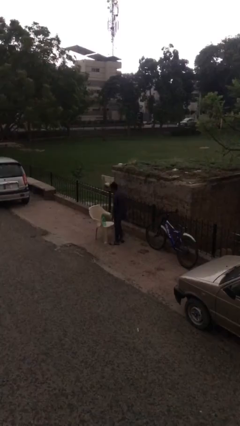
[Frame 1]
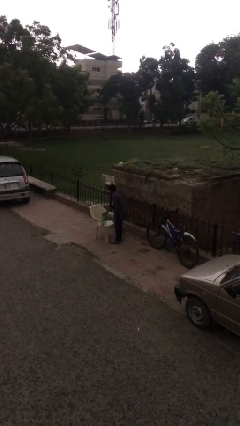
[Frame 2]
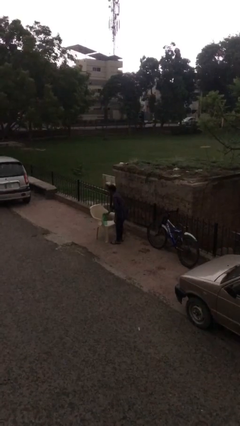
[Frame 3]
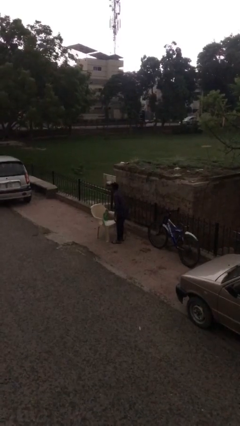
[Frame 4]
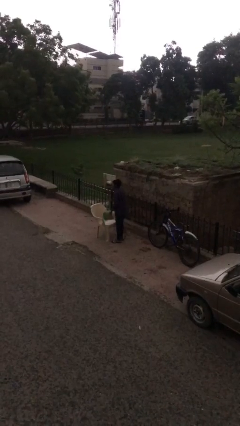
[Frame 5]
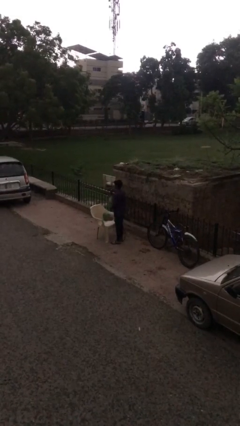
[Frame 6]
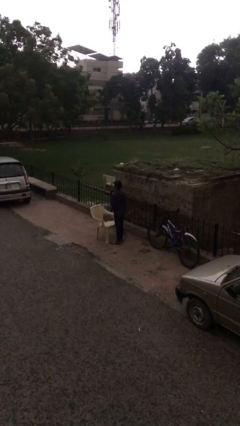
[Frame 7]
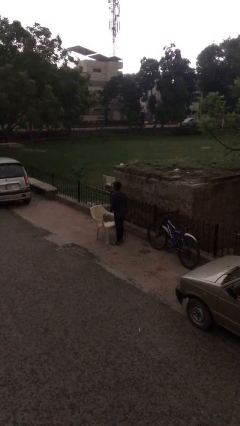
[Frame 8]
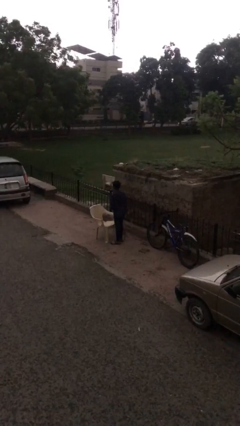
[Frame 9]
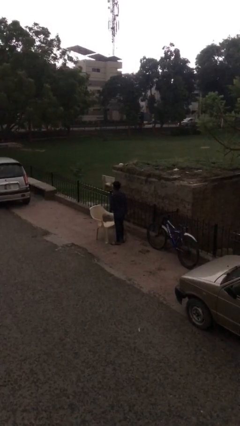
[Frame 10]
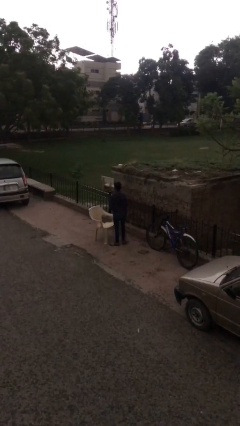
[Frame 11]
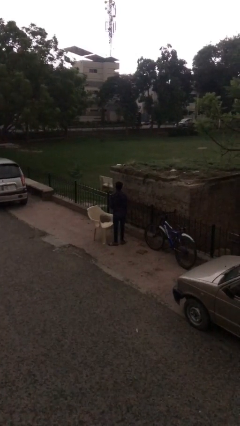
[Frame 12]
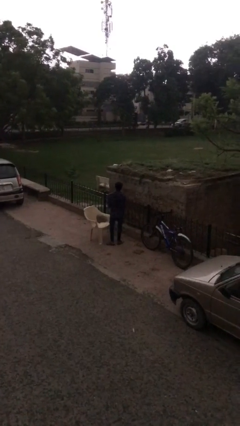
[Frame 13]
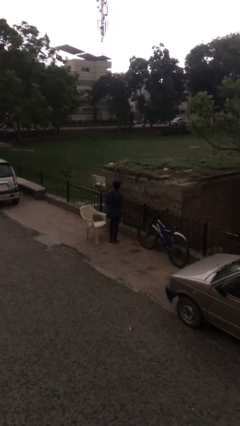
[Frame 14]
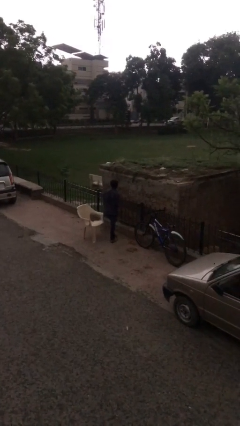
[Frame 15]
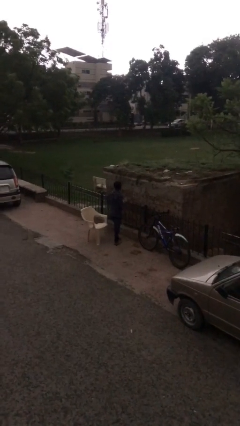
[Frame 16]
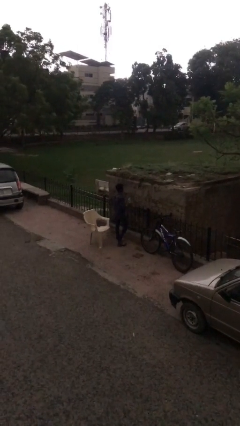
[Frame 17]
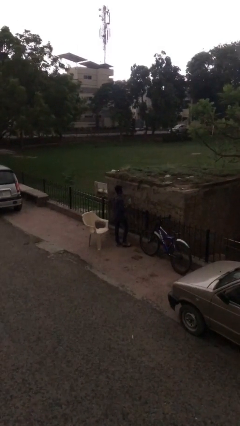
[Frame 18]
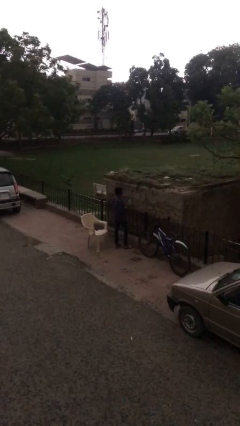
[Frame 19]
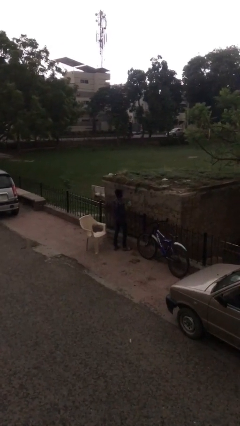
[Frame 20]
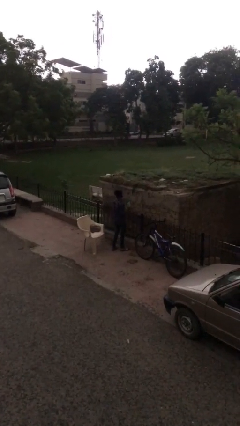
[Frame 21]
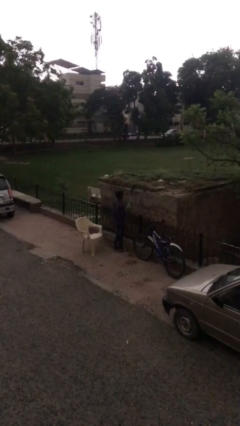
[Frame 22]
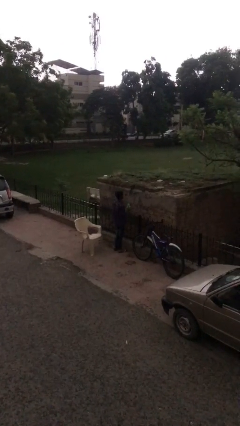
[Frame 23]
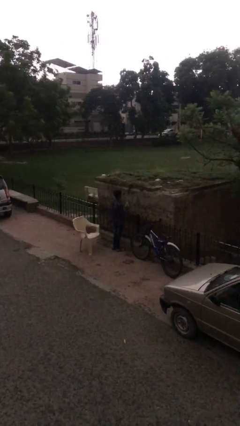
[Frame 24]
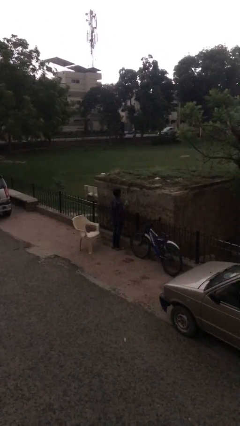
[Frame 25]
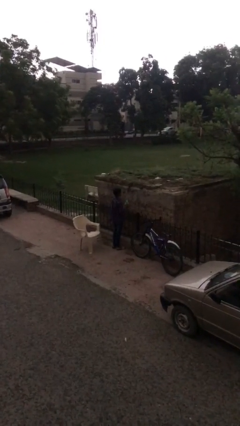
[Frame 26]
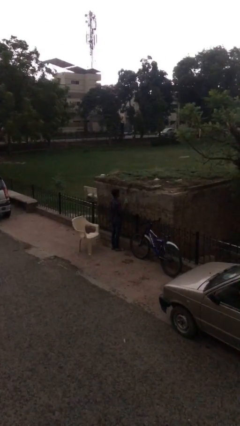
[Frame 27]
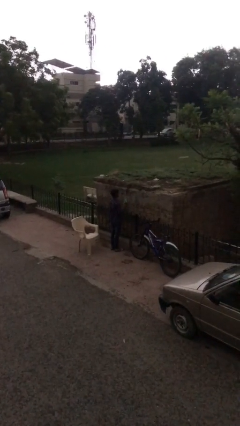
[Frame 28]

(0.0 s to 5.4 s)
person picks up object from table

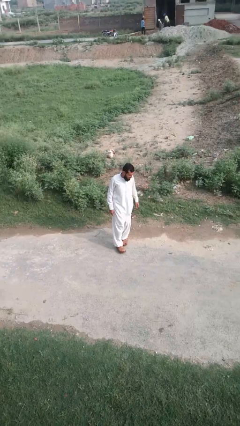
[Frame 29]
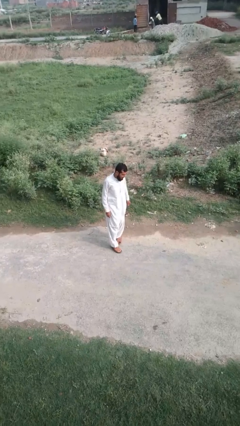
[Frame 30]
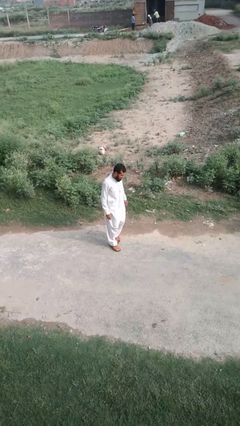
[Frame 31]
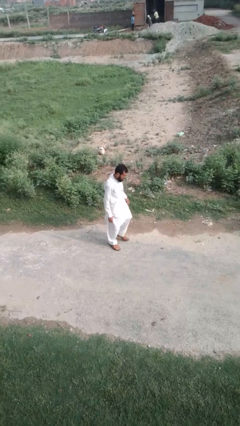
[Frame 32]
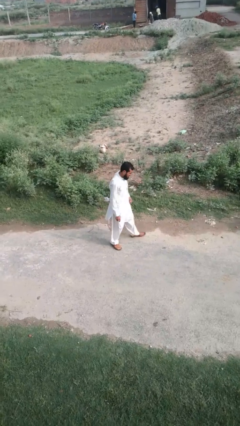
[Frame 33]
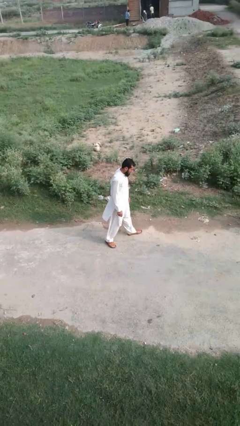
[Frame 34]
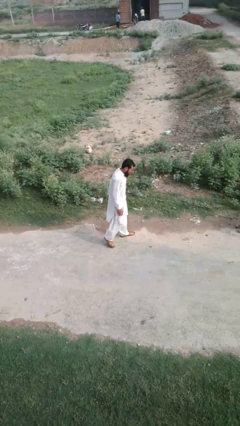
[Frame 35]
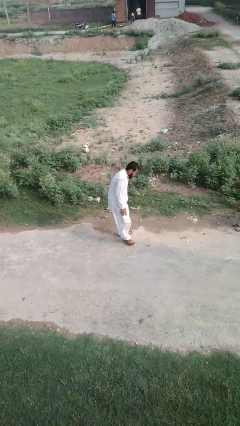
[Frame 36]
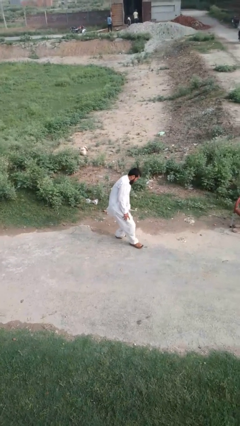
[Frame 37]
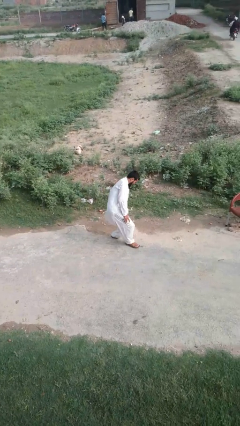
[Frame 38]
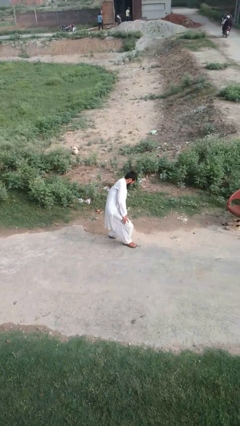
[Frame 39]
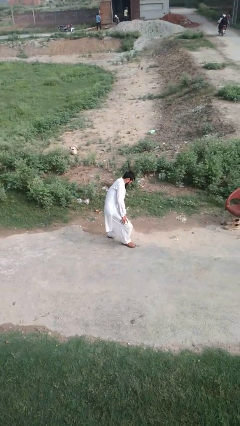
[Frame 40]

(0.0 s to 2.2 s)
person trips on object on floor

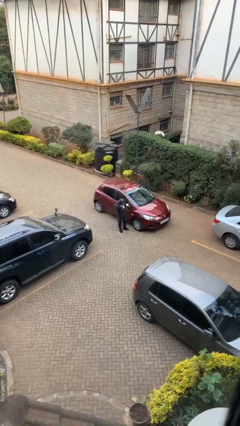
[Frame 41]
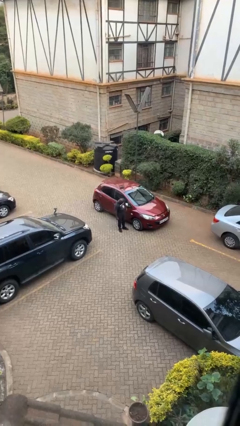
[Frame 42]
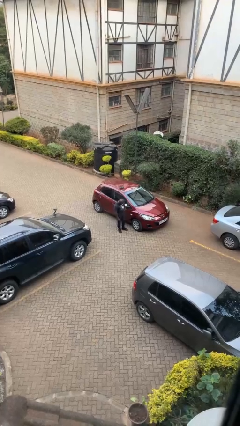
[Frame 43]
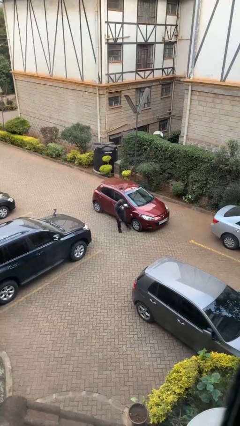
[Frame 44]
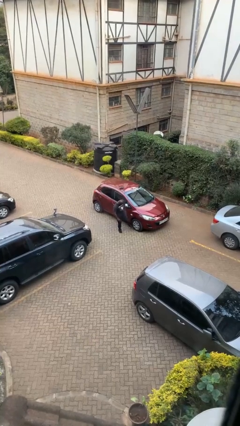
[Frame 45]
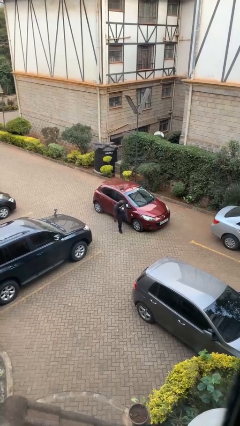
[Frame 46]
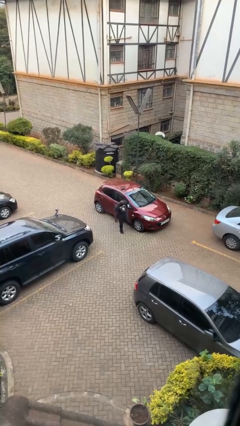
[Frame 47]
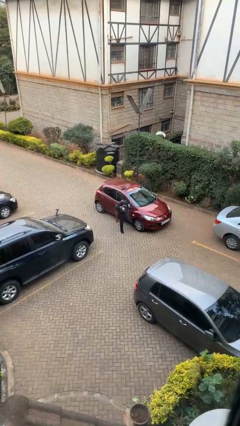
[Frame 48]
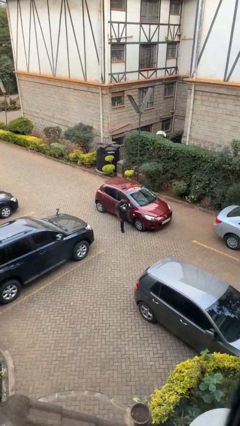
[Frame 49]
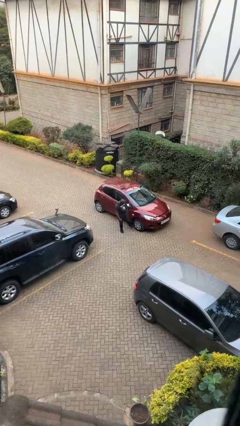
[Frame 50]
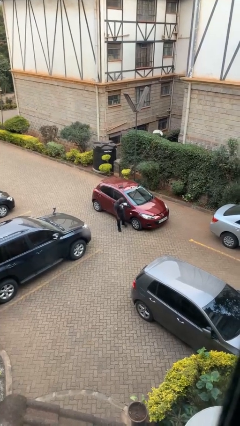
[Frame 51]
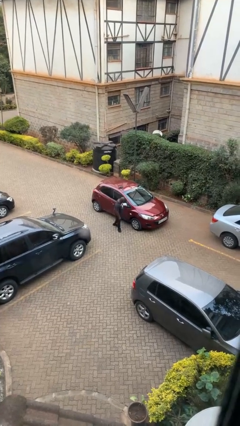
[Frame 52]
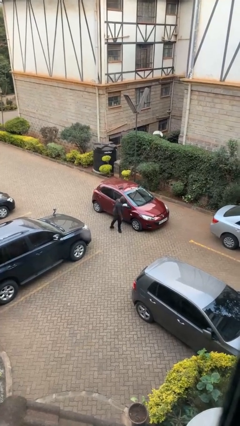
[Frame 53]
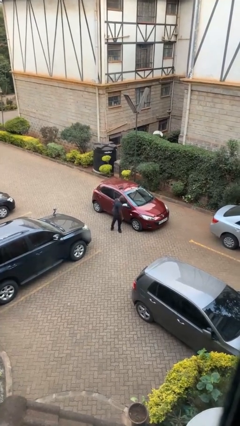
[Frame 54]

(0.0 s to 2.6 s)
person kicks car tires

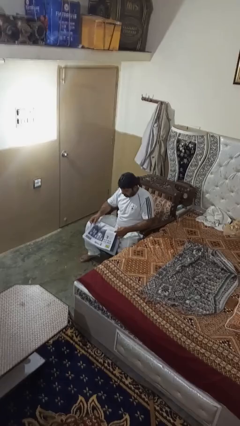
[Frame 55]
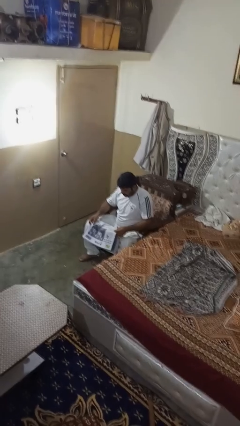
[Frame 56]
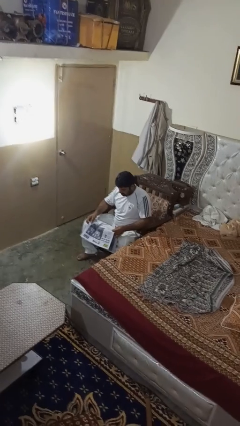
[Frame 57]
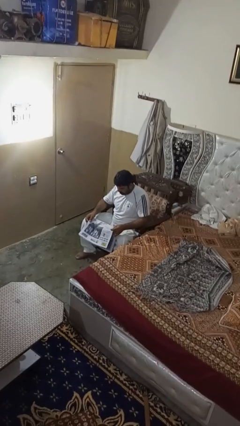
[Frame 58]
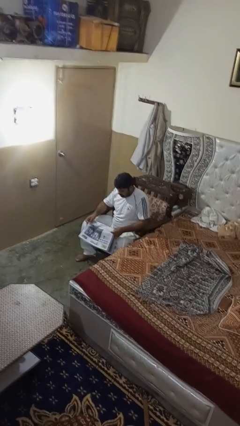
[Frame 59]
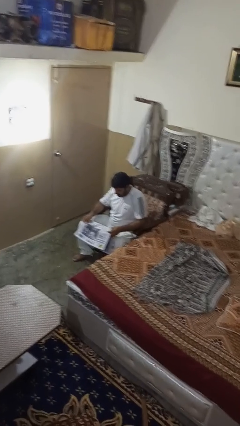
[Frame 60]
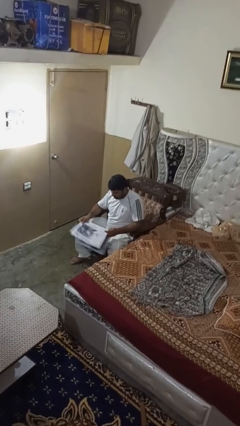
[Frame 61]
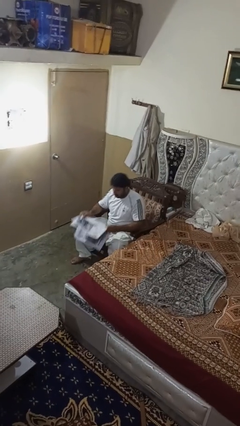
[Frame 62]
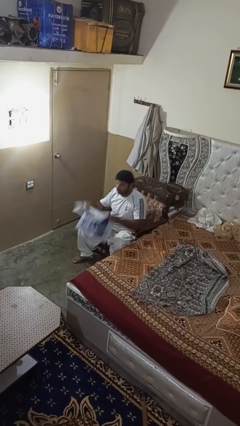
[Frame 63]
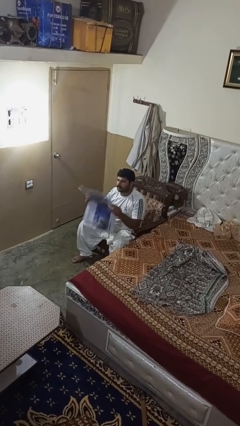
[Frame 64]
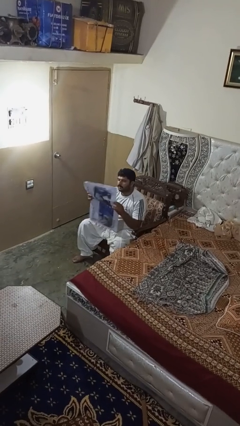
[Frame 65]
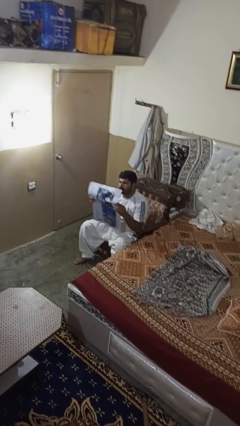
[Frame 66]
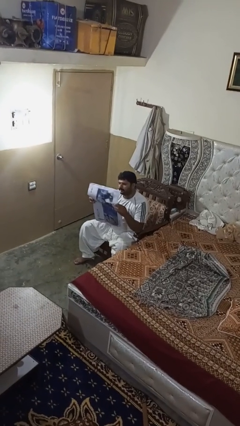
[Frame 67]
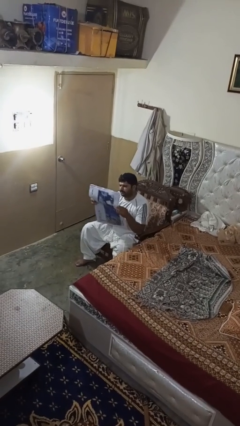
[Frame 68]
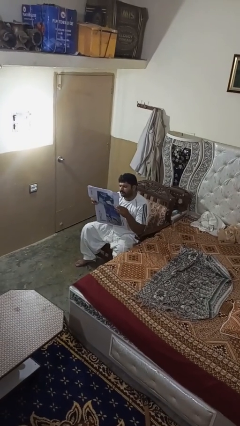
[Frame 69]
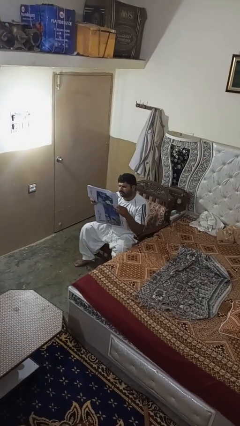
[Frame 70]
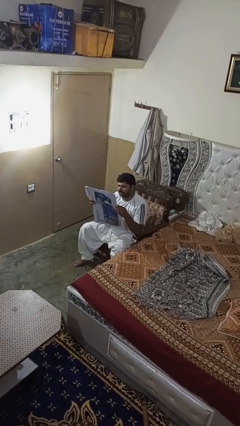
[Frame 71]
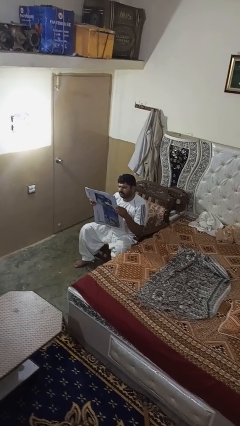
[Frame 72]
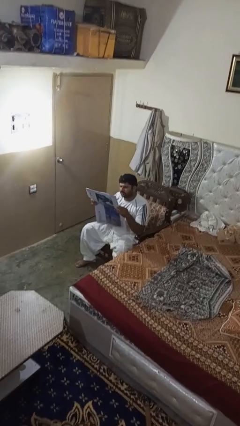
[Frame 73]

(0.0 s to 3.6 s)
person reads newspaper

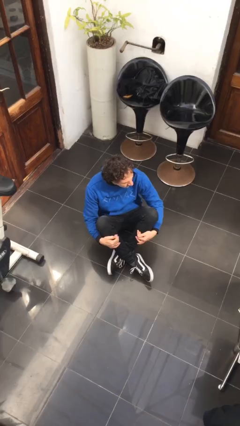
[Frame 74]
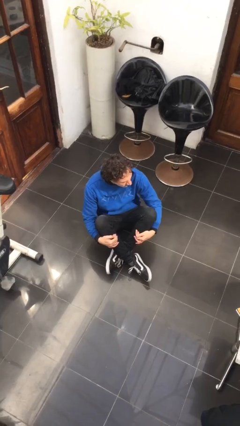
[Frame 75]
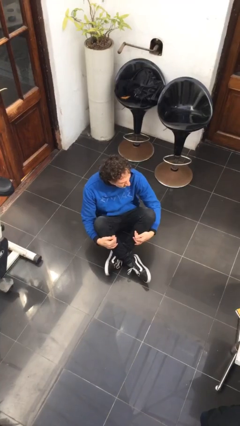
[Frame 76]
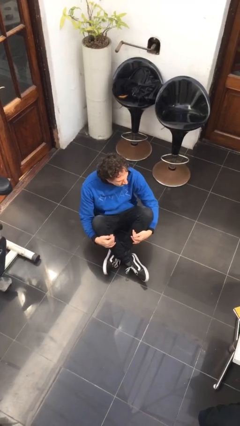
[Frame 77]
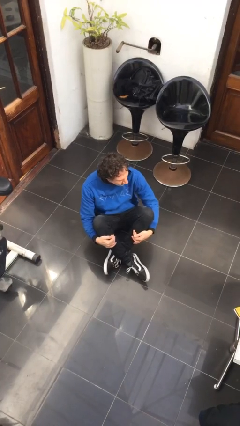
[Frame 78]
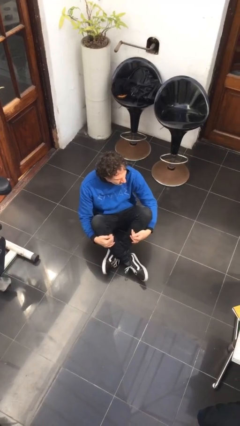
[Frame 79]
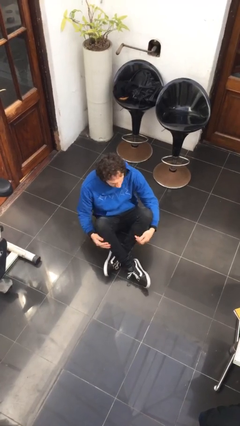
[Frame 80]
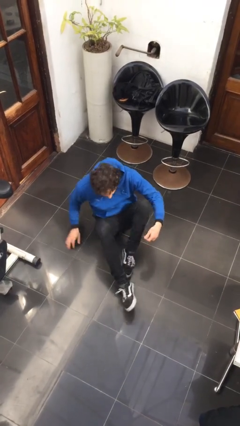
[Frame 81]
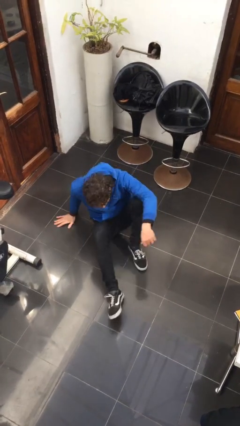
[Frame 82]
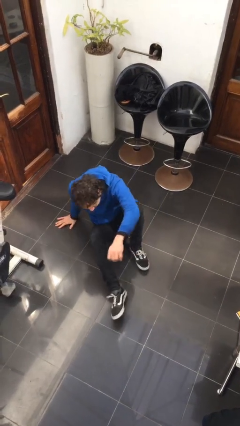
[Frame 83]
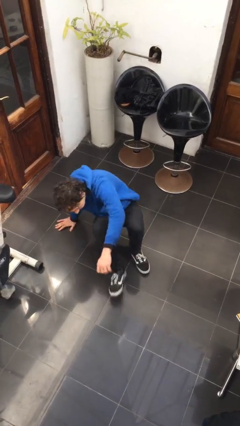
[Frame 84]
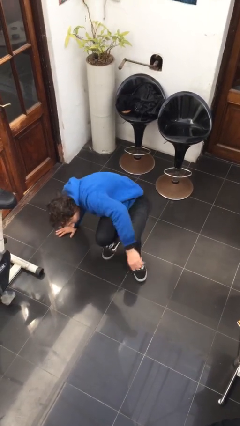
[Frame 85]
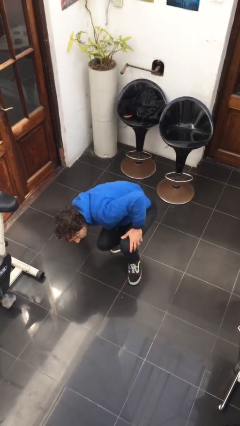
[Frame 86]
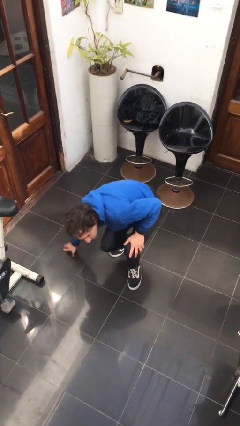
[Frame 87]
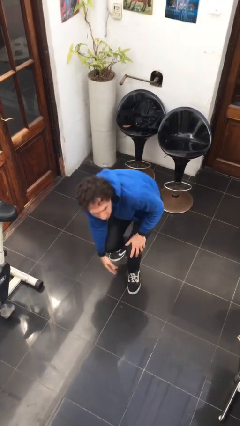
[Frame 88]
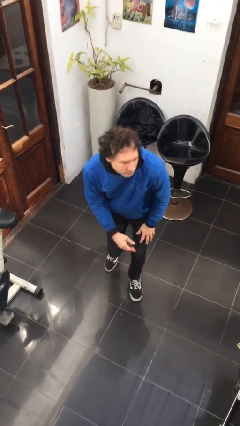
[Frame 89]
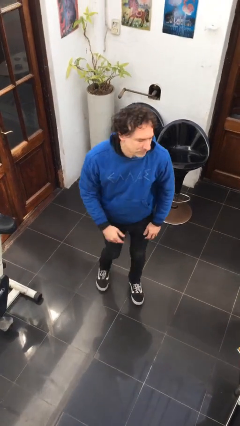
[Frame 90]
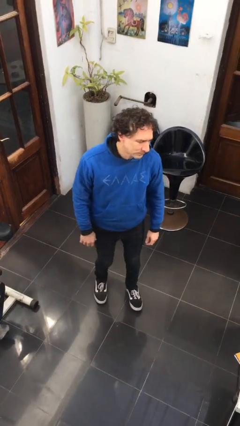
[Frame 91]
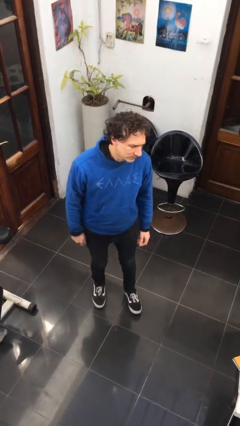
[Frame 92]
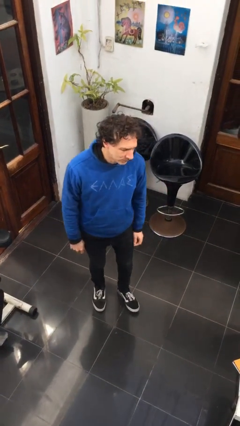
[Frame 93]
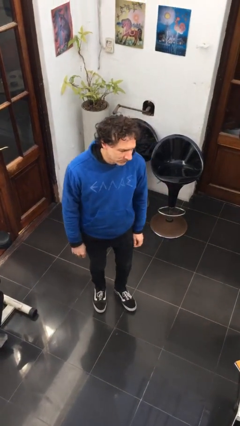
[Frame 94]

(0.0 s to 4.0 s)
person stands up from floor
